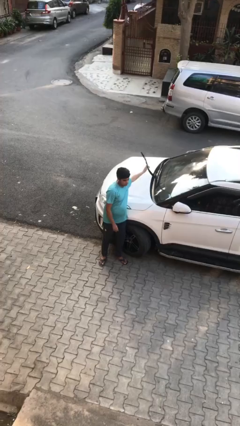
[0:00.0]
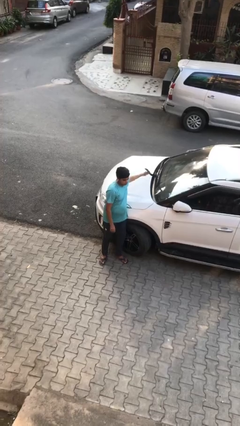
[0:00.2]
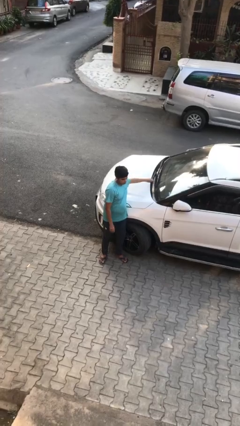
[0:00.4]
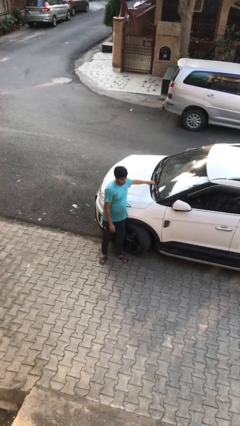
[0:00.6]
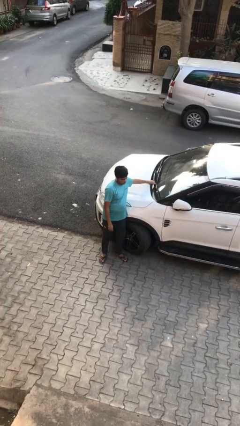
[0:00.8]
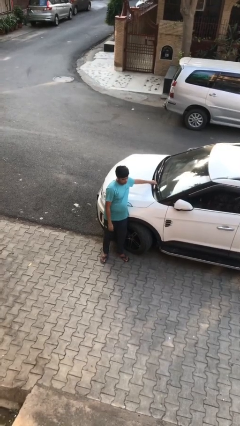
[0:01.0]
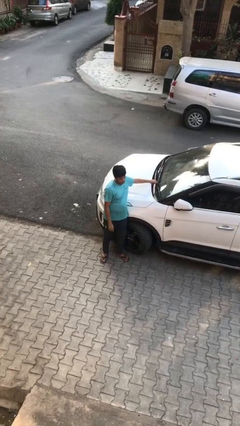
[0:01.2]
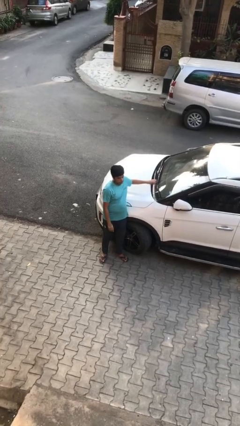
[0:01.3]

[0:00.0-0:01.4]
person flips down car wipers

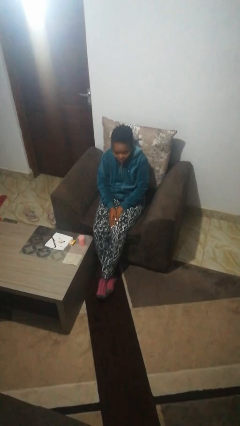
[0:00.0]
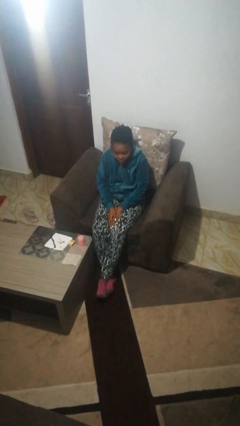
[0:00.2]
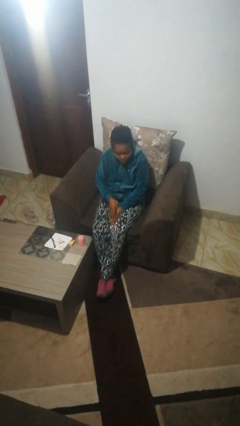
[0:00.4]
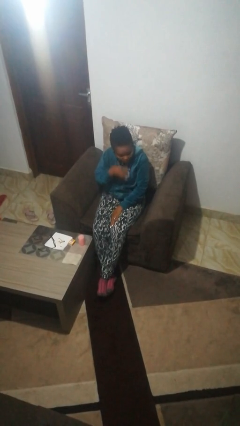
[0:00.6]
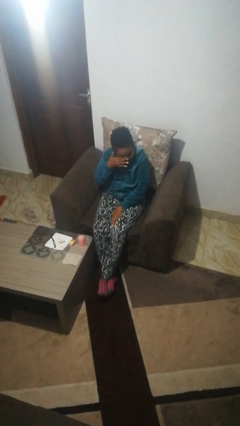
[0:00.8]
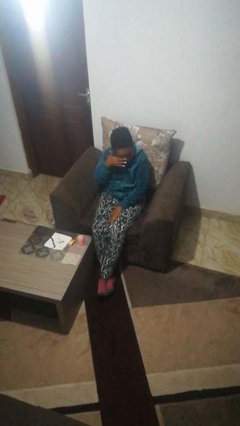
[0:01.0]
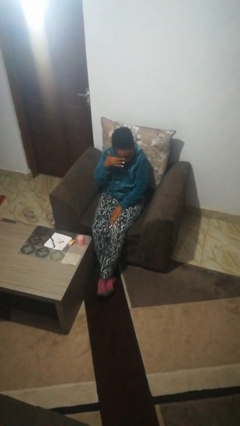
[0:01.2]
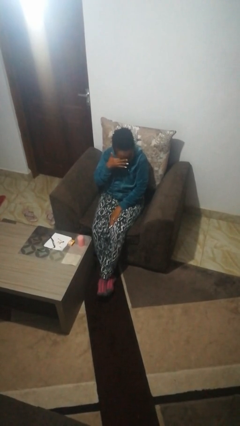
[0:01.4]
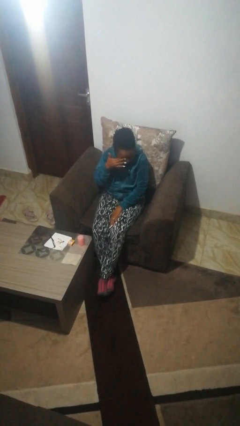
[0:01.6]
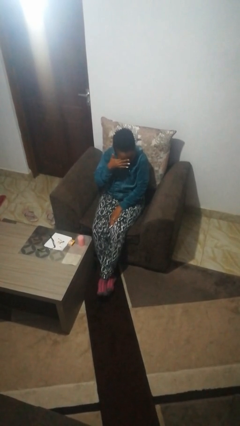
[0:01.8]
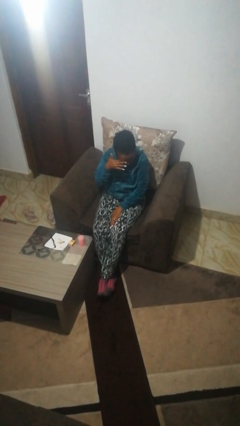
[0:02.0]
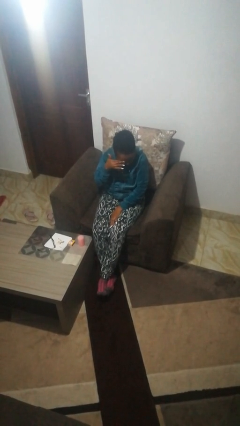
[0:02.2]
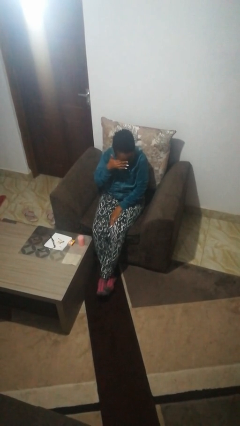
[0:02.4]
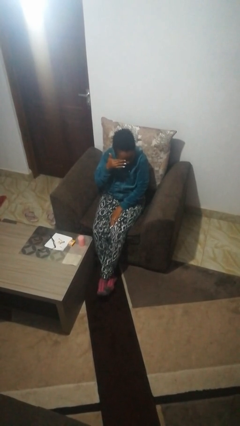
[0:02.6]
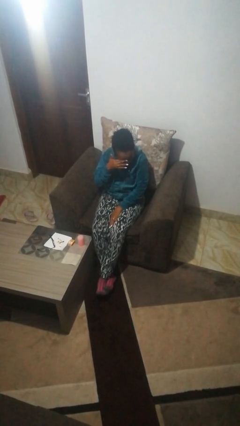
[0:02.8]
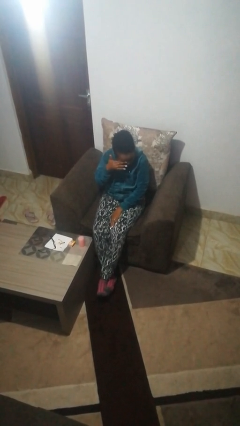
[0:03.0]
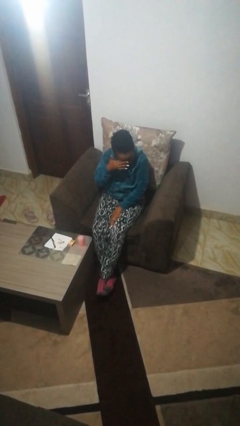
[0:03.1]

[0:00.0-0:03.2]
person rubs eyes

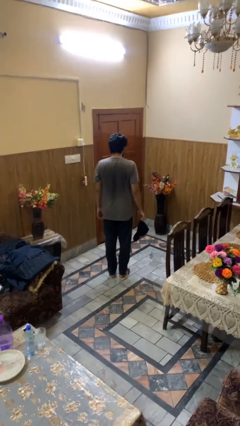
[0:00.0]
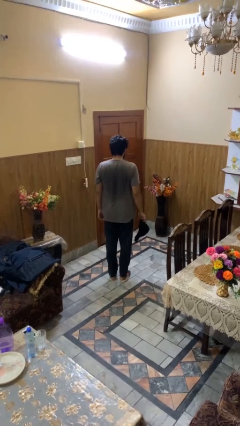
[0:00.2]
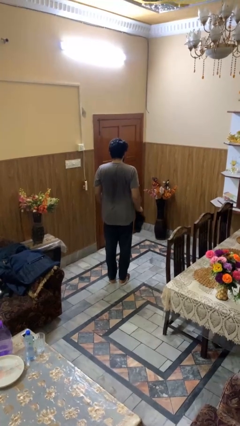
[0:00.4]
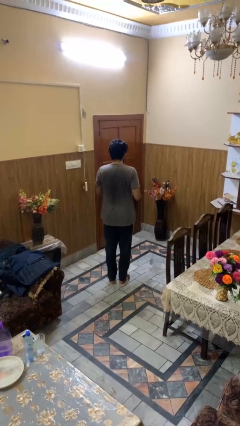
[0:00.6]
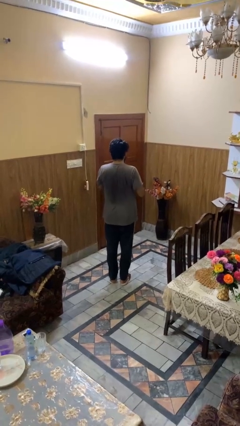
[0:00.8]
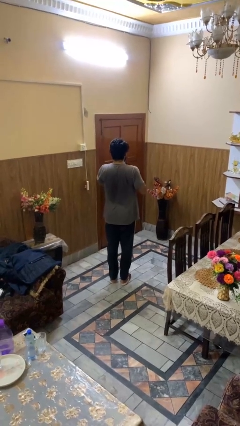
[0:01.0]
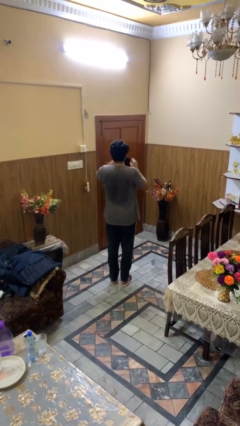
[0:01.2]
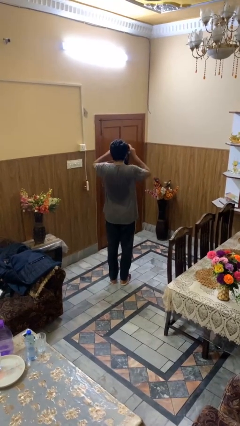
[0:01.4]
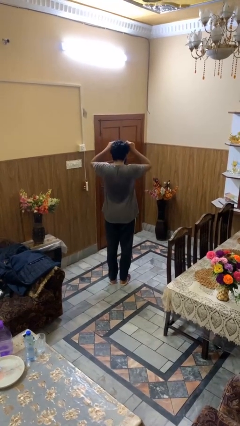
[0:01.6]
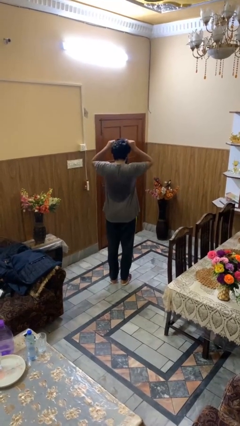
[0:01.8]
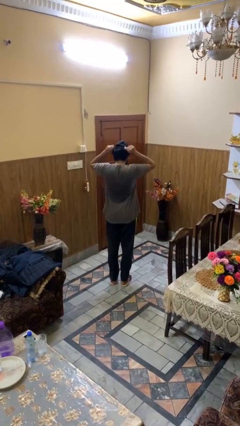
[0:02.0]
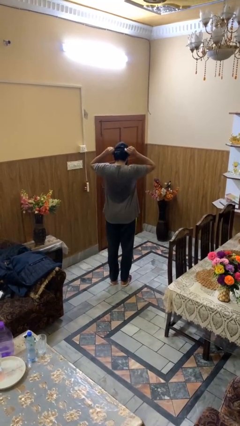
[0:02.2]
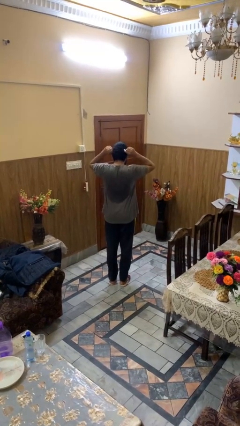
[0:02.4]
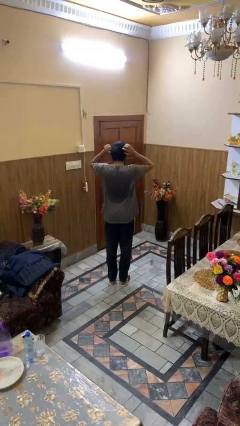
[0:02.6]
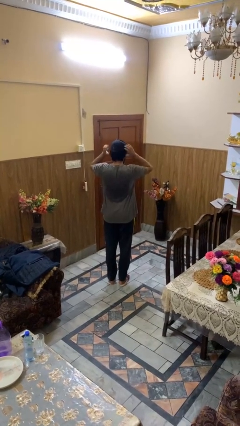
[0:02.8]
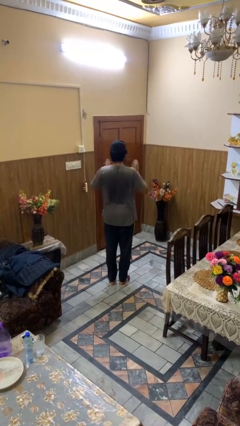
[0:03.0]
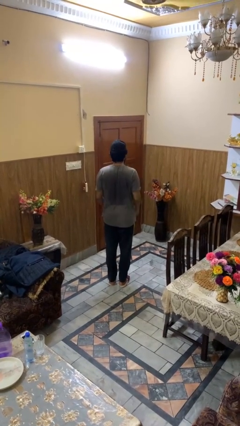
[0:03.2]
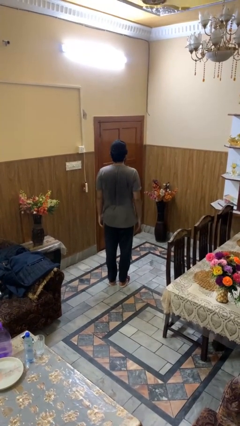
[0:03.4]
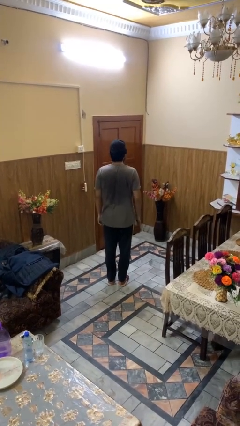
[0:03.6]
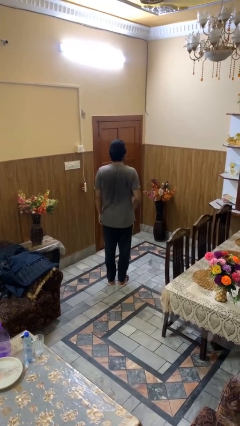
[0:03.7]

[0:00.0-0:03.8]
person puts on hat

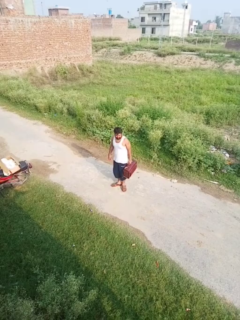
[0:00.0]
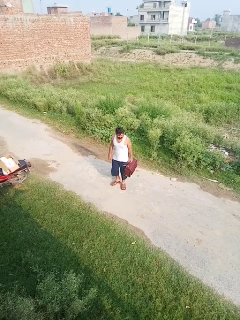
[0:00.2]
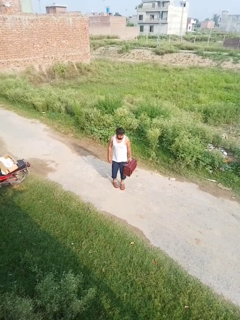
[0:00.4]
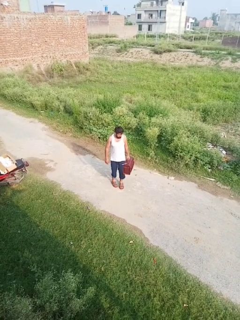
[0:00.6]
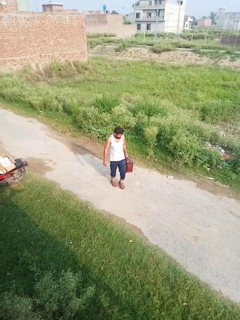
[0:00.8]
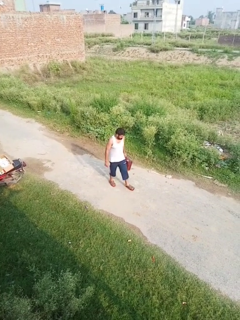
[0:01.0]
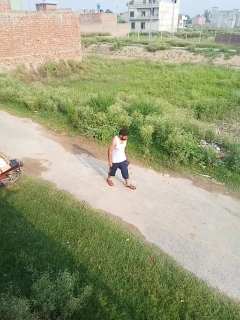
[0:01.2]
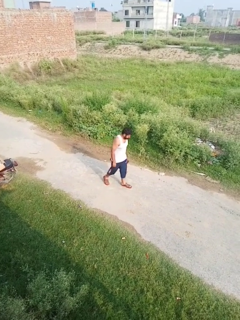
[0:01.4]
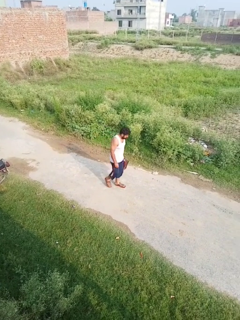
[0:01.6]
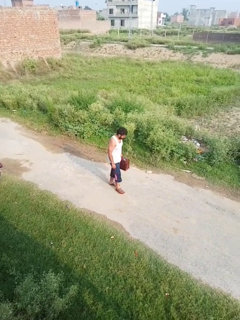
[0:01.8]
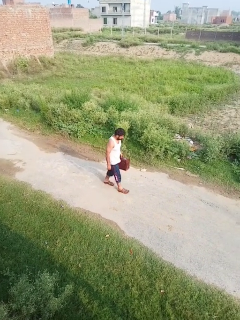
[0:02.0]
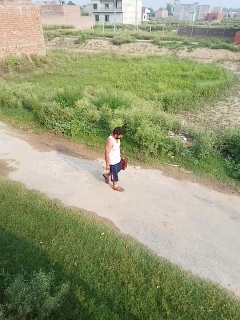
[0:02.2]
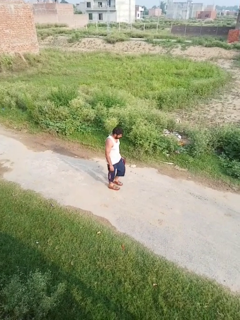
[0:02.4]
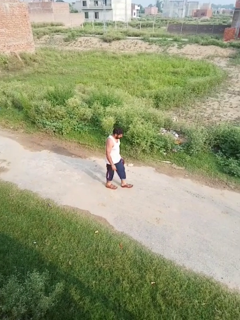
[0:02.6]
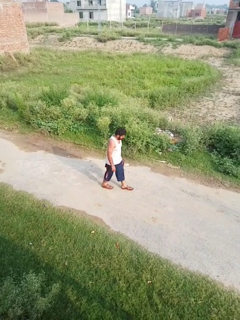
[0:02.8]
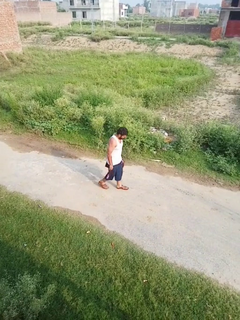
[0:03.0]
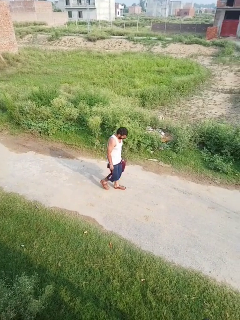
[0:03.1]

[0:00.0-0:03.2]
person carries groceries

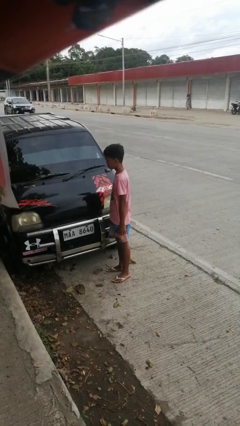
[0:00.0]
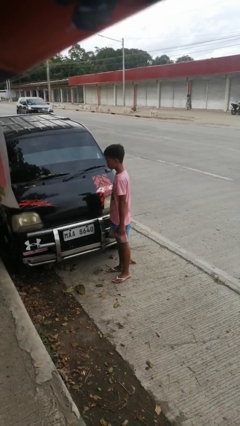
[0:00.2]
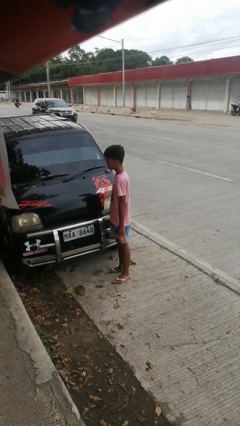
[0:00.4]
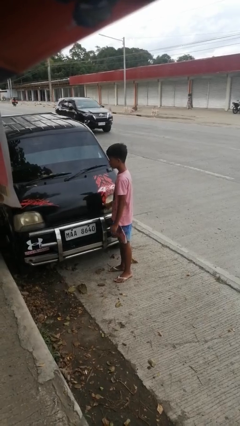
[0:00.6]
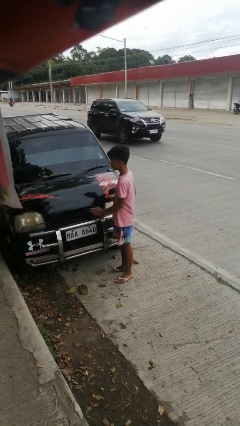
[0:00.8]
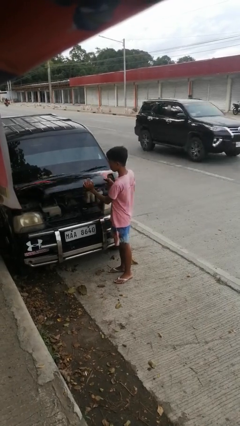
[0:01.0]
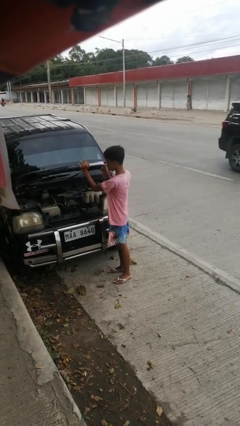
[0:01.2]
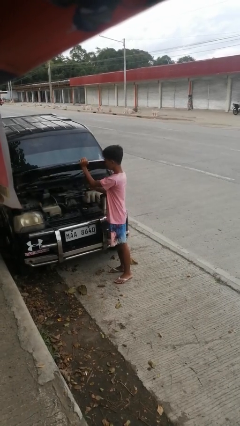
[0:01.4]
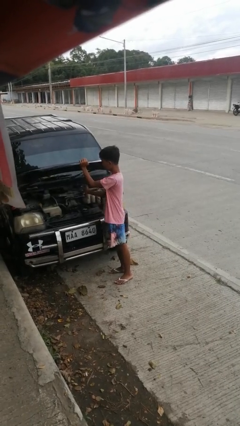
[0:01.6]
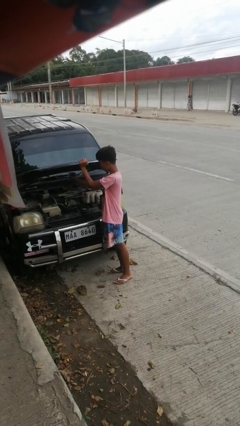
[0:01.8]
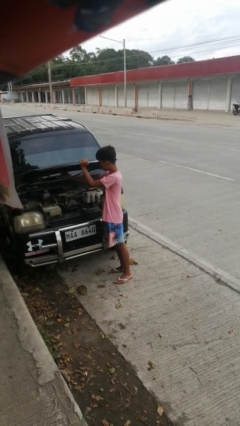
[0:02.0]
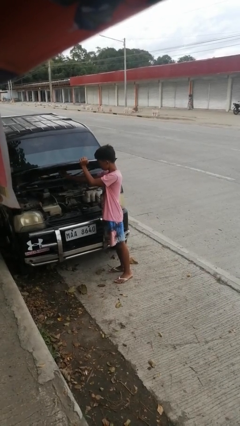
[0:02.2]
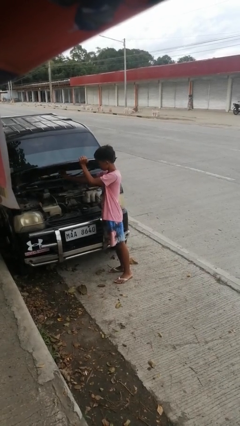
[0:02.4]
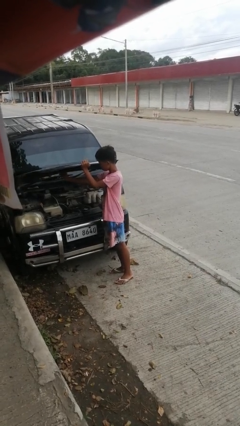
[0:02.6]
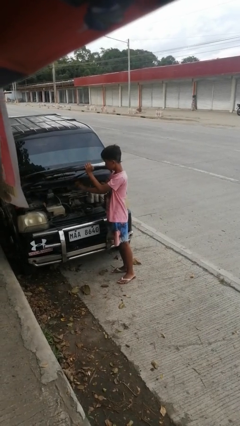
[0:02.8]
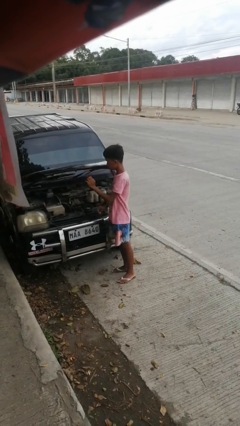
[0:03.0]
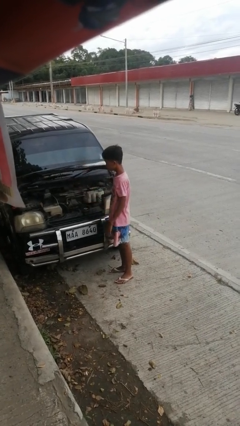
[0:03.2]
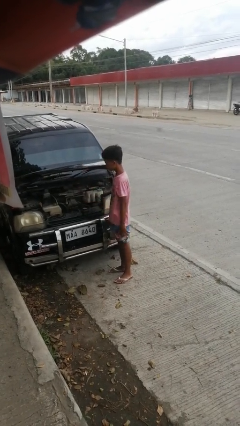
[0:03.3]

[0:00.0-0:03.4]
person opens car hood

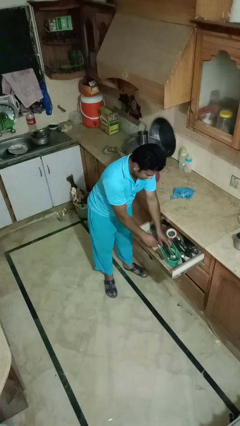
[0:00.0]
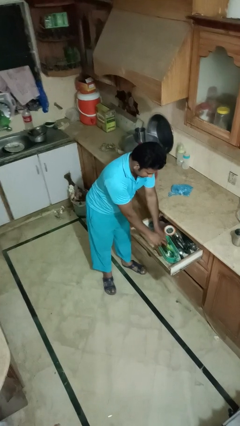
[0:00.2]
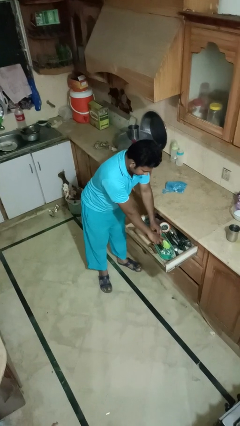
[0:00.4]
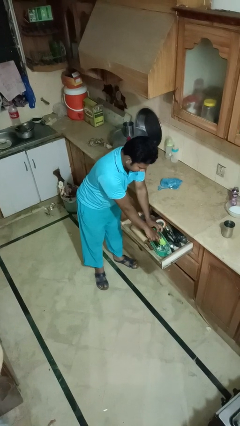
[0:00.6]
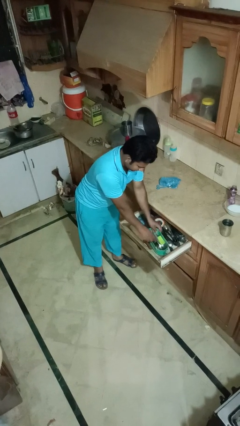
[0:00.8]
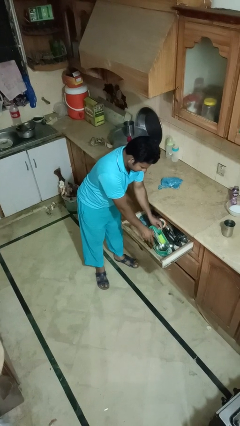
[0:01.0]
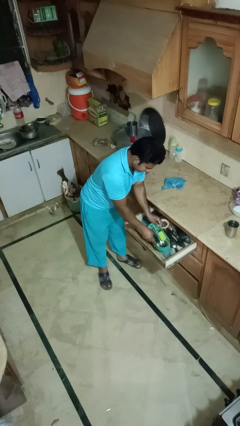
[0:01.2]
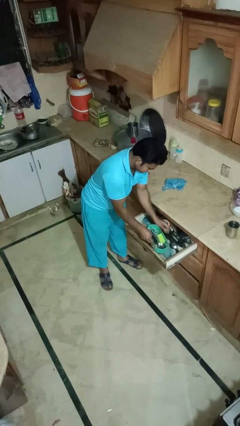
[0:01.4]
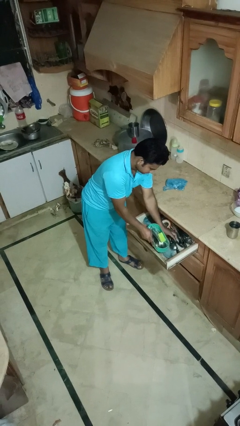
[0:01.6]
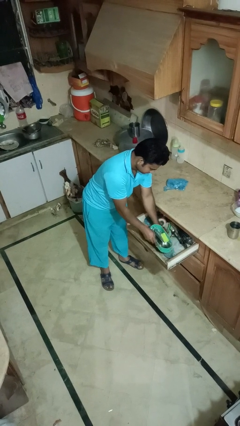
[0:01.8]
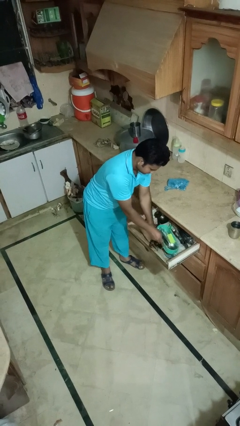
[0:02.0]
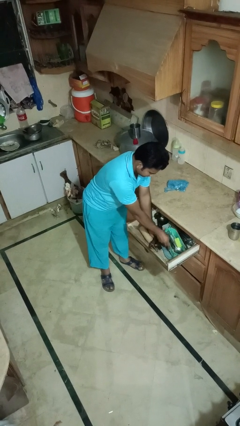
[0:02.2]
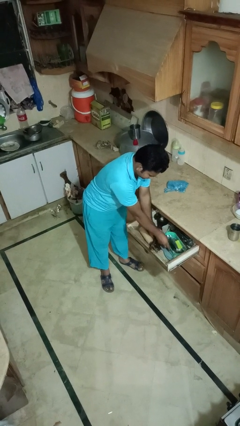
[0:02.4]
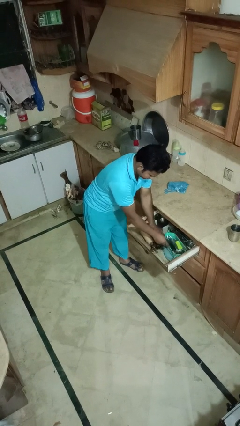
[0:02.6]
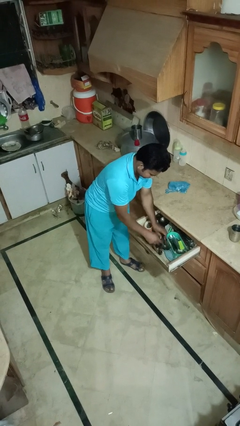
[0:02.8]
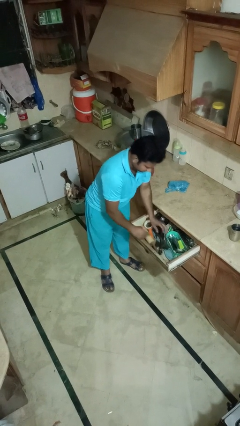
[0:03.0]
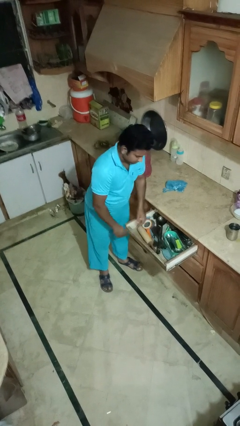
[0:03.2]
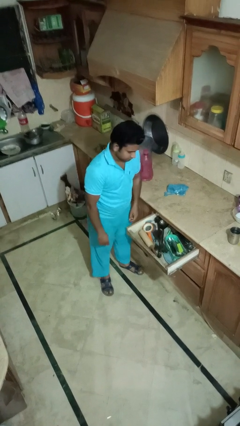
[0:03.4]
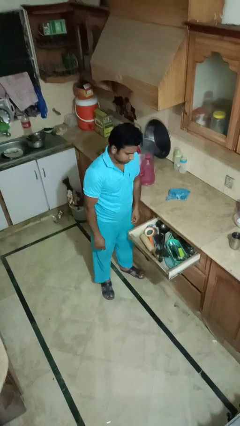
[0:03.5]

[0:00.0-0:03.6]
person searches in kitchen drawer
